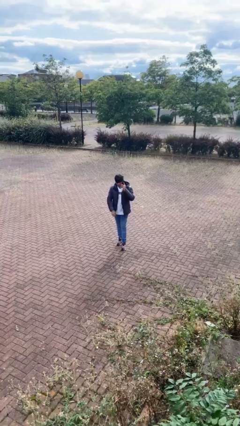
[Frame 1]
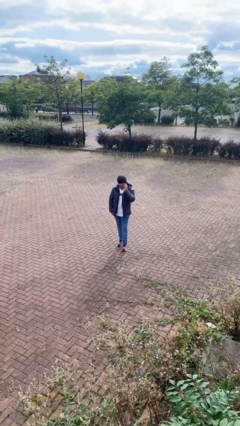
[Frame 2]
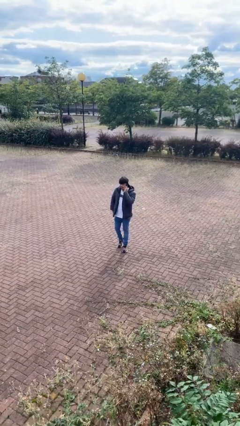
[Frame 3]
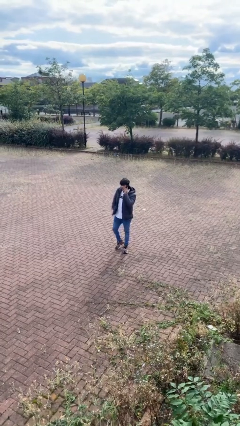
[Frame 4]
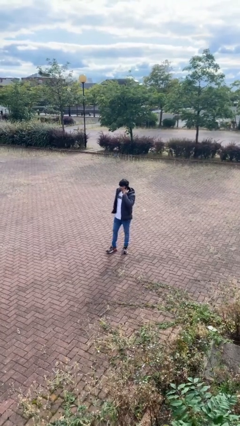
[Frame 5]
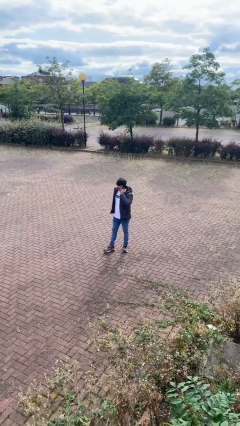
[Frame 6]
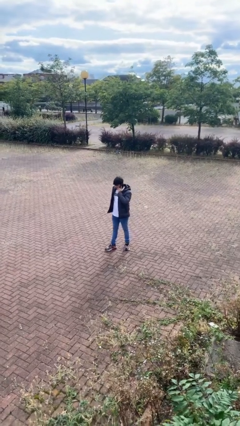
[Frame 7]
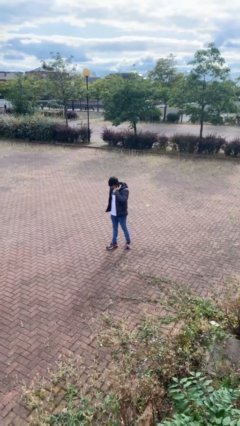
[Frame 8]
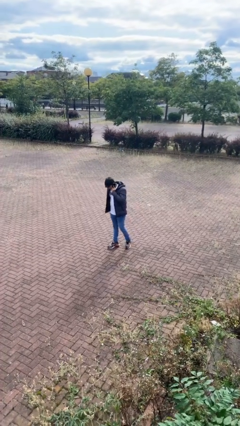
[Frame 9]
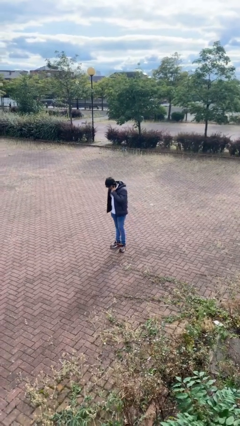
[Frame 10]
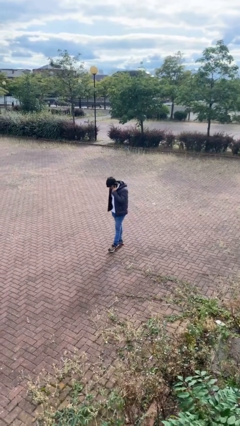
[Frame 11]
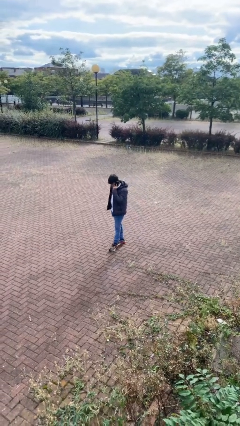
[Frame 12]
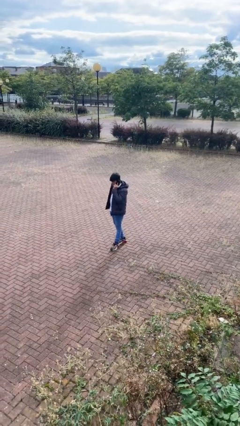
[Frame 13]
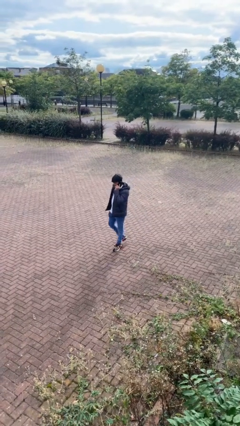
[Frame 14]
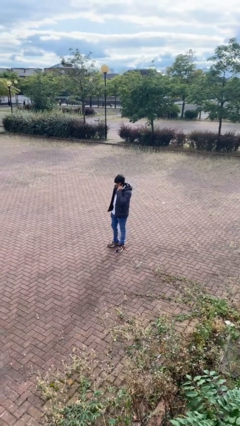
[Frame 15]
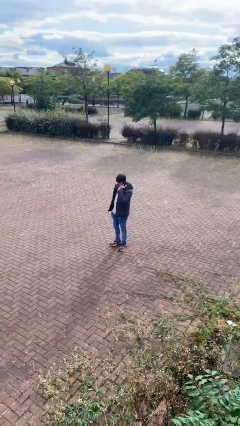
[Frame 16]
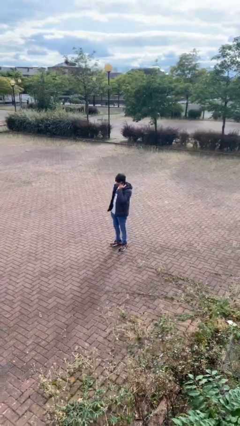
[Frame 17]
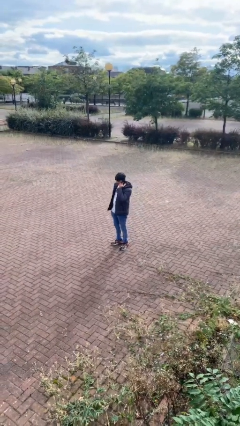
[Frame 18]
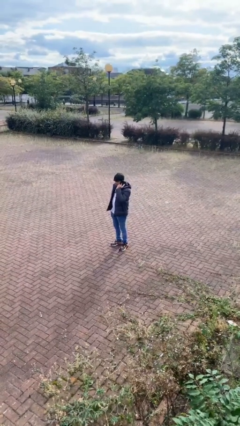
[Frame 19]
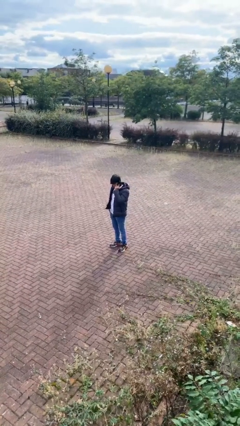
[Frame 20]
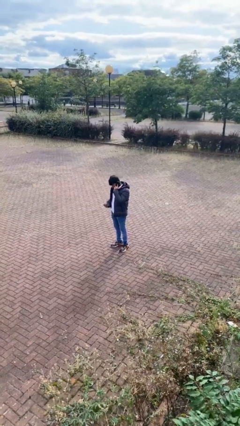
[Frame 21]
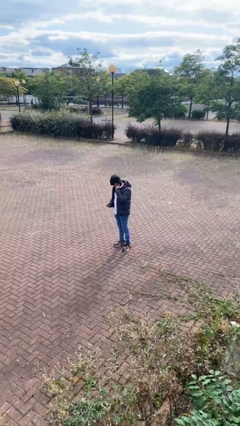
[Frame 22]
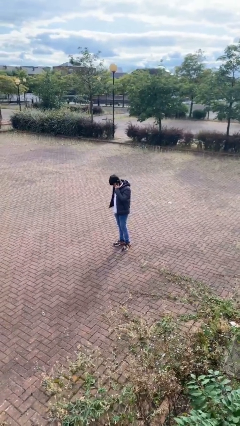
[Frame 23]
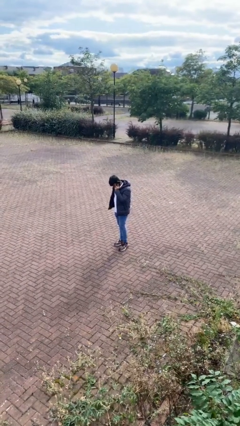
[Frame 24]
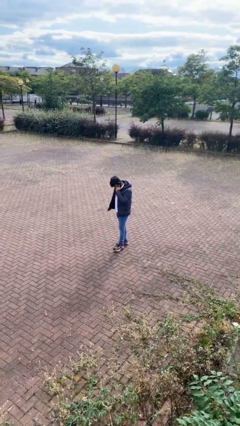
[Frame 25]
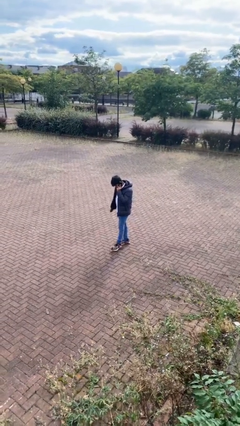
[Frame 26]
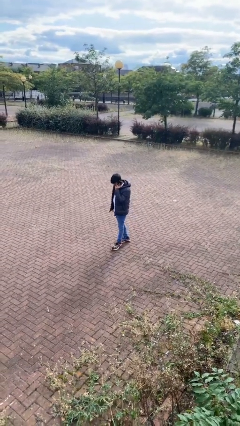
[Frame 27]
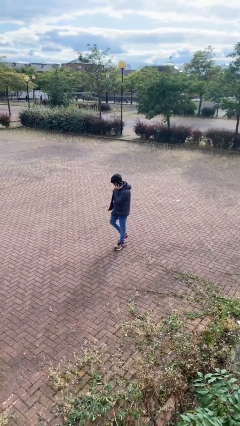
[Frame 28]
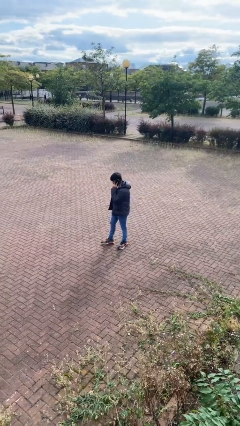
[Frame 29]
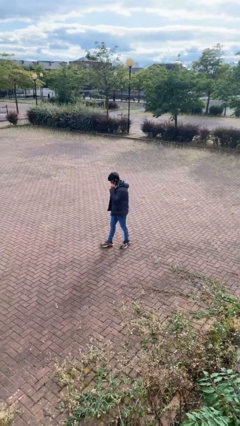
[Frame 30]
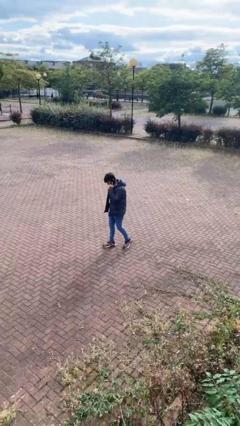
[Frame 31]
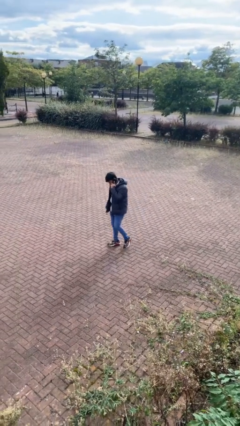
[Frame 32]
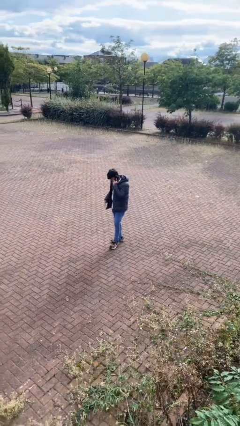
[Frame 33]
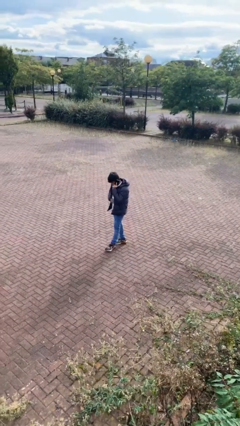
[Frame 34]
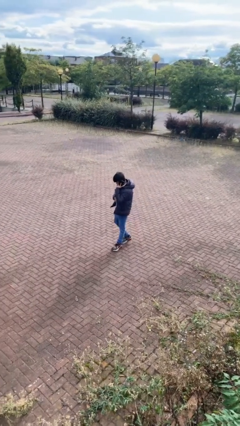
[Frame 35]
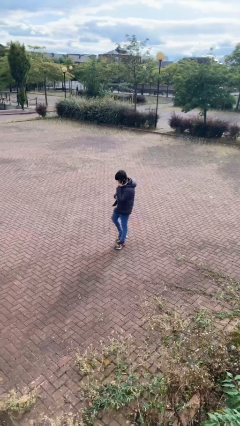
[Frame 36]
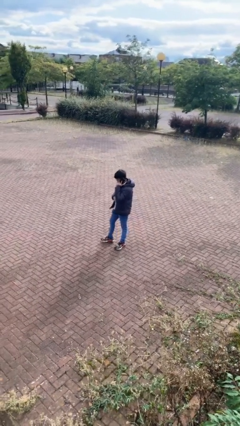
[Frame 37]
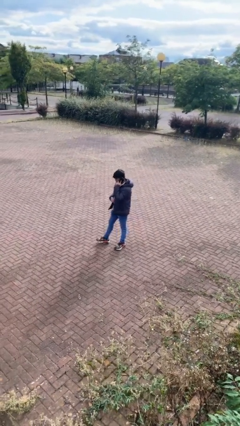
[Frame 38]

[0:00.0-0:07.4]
person talks on phone

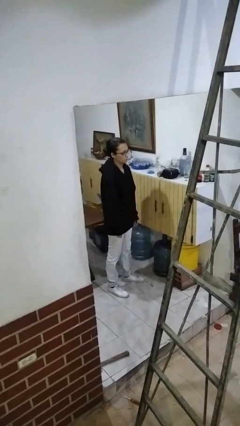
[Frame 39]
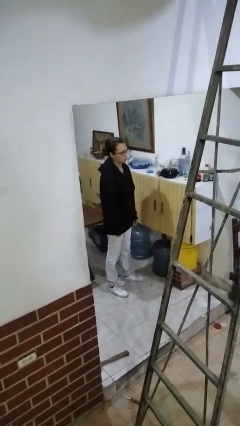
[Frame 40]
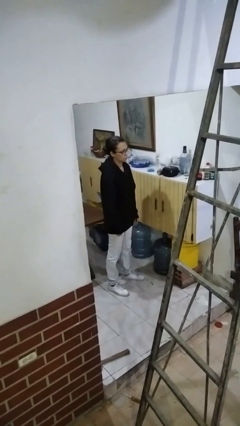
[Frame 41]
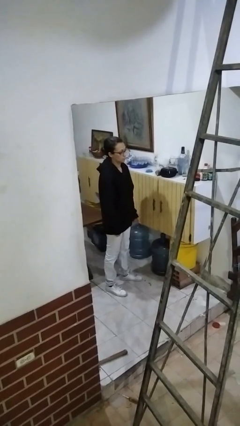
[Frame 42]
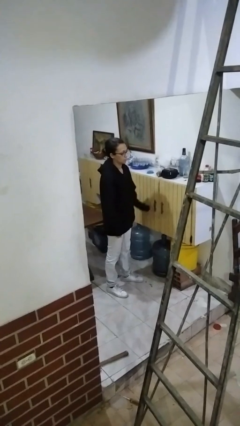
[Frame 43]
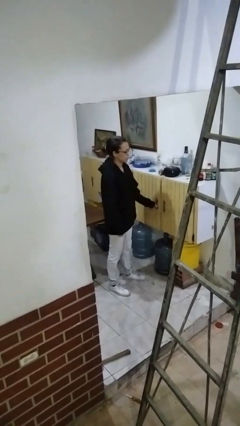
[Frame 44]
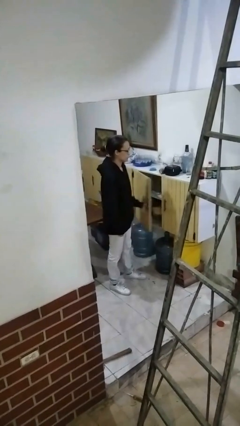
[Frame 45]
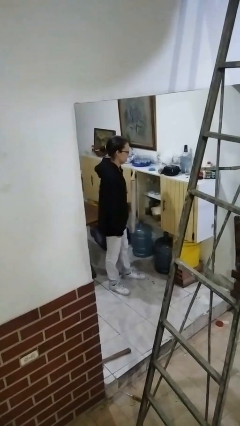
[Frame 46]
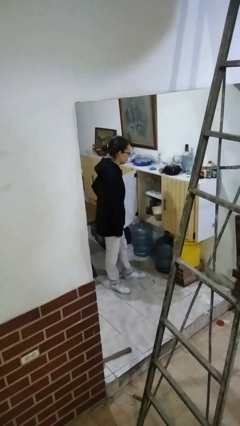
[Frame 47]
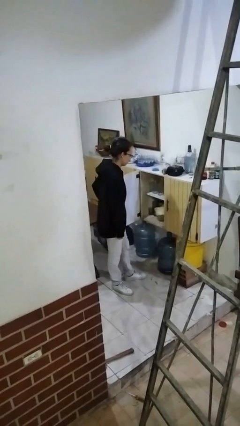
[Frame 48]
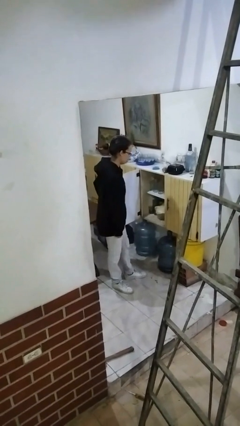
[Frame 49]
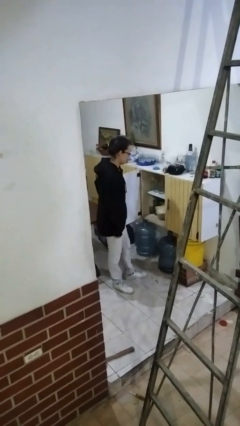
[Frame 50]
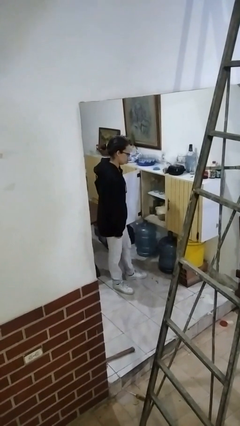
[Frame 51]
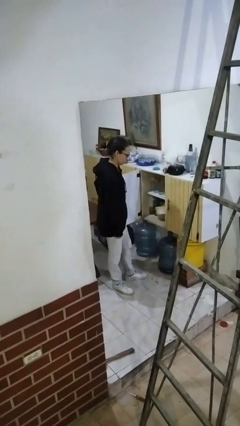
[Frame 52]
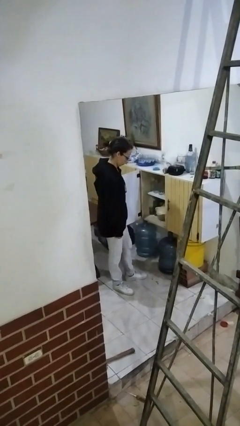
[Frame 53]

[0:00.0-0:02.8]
person opens cabinet

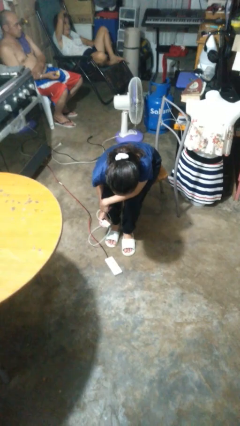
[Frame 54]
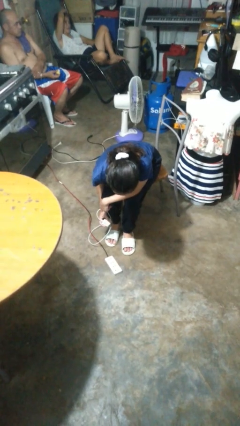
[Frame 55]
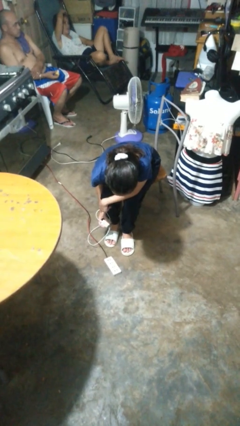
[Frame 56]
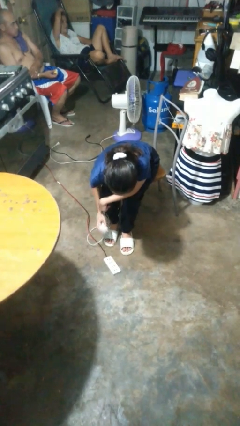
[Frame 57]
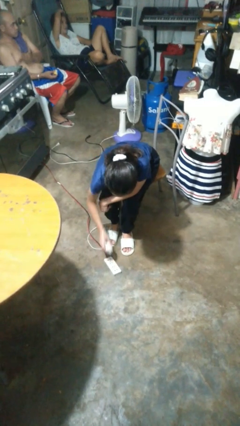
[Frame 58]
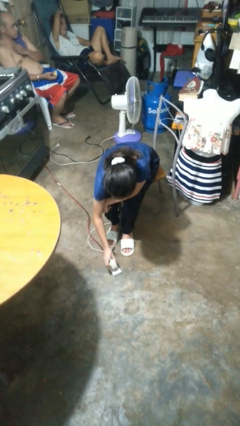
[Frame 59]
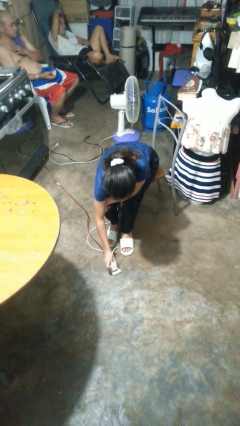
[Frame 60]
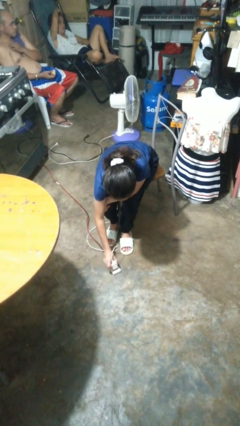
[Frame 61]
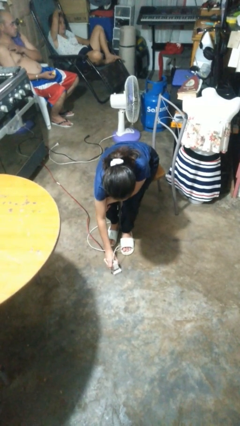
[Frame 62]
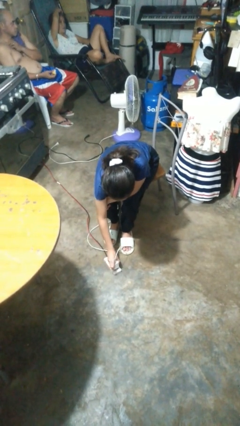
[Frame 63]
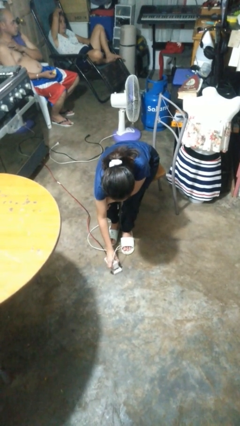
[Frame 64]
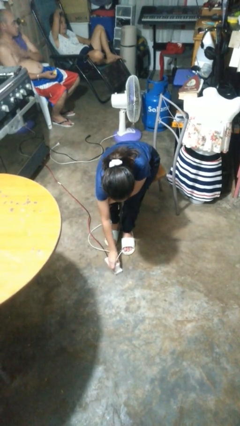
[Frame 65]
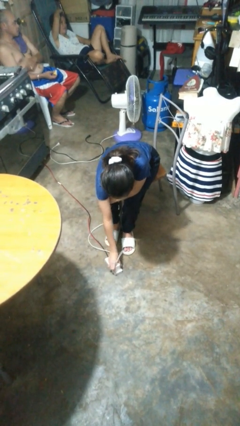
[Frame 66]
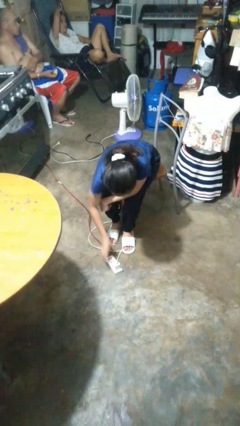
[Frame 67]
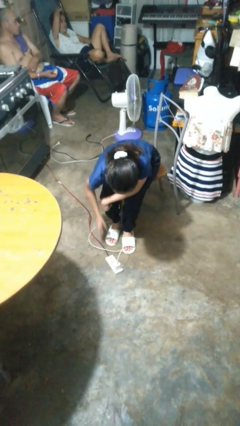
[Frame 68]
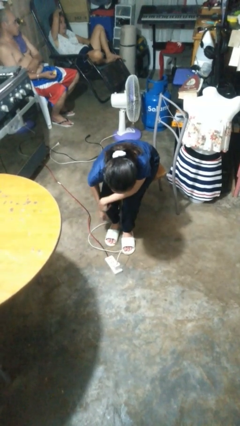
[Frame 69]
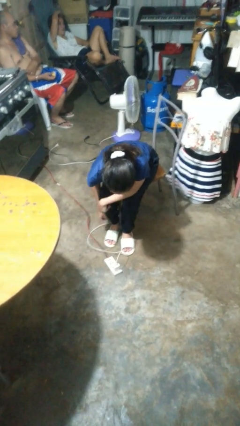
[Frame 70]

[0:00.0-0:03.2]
person plugs into electrical socket

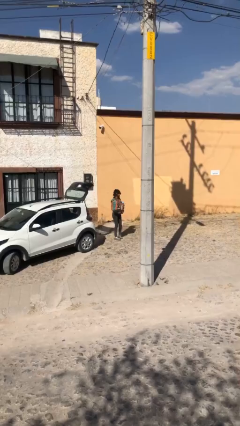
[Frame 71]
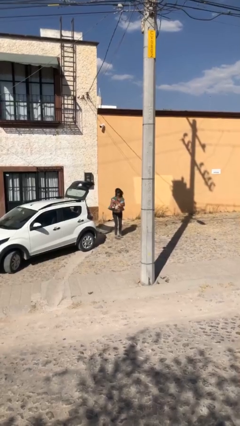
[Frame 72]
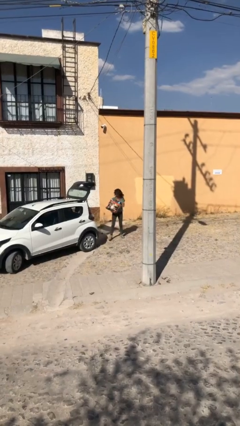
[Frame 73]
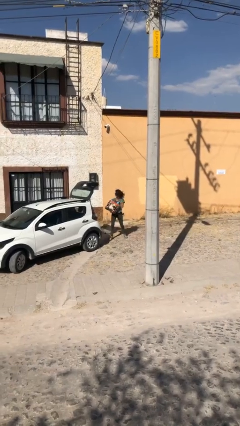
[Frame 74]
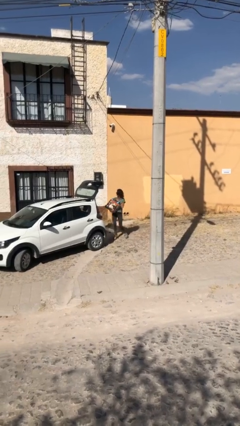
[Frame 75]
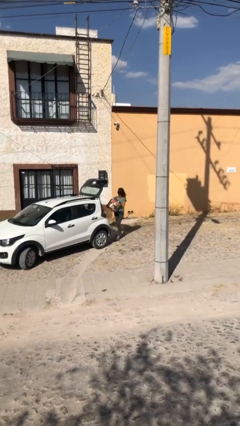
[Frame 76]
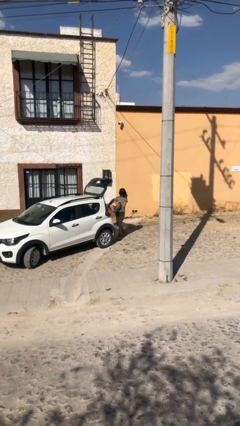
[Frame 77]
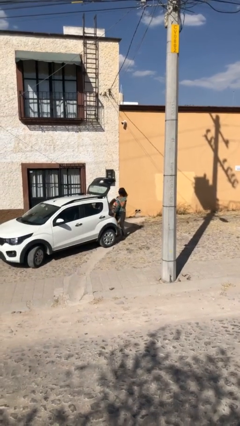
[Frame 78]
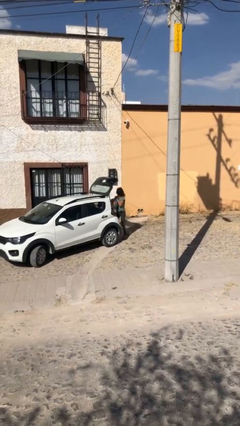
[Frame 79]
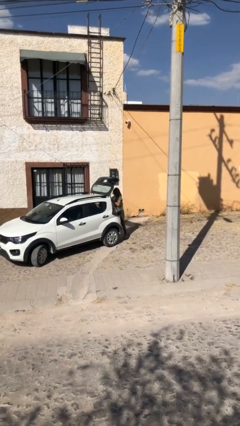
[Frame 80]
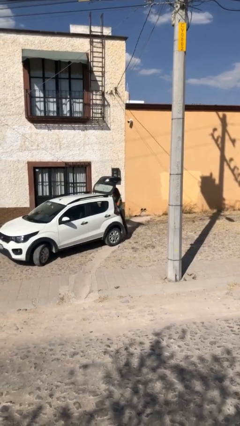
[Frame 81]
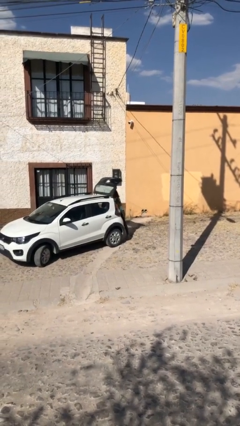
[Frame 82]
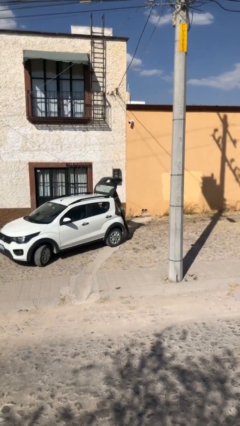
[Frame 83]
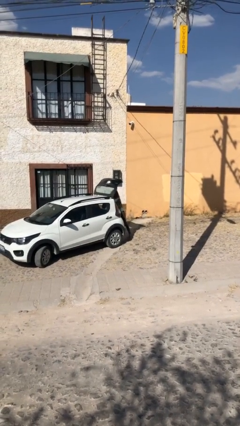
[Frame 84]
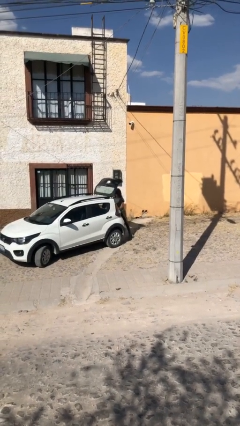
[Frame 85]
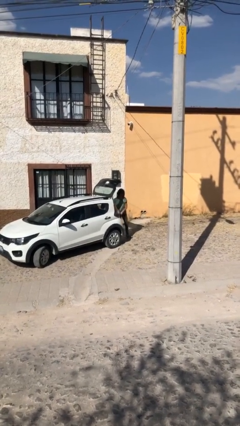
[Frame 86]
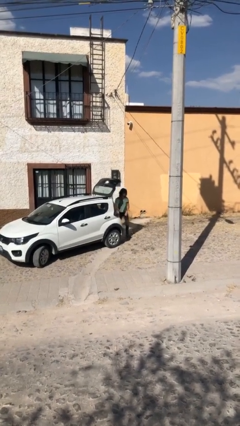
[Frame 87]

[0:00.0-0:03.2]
person loads car

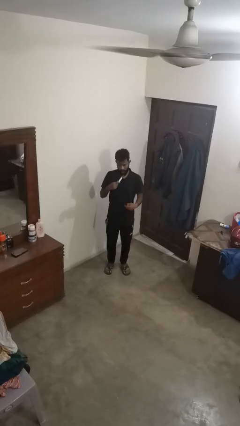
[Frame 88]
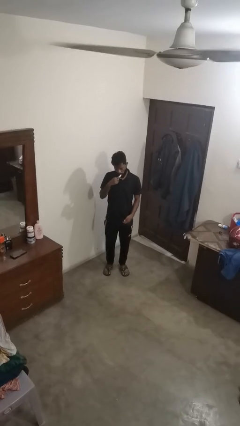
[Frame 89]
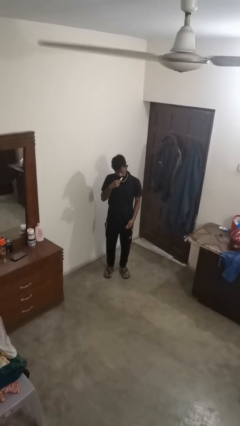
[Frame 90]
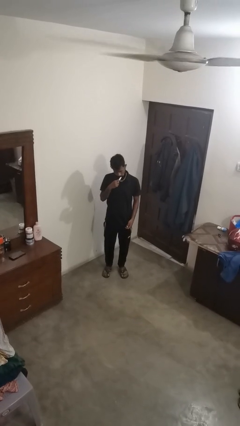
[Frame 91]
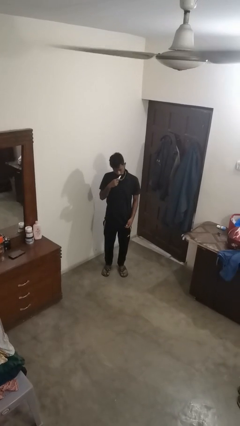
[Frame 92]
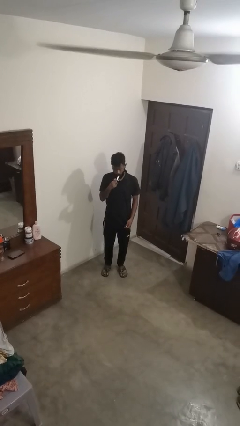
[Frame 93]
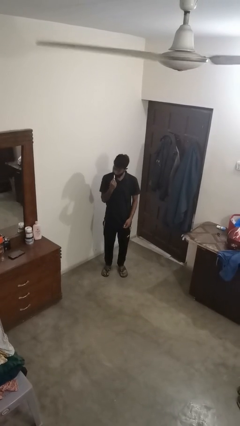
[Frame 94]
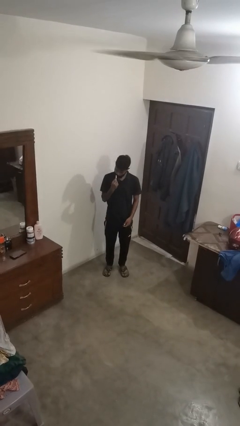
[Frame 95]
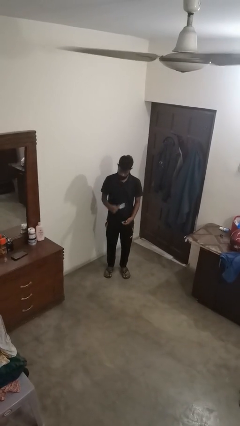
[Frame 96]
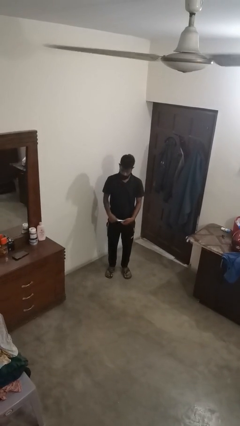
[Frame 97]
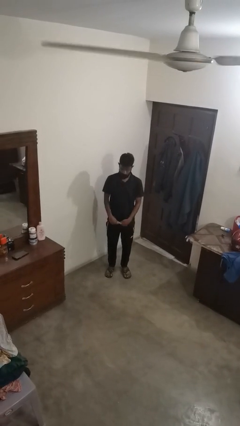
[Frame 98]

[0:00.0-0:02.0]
person brushes teeth
